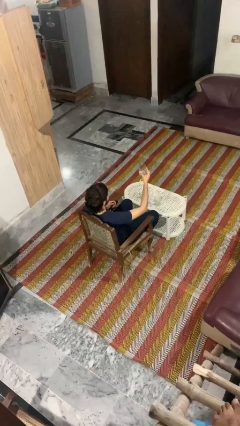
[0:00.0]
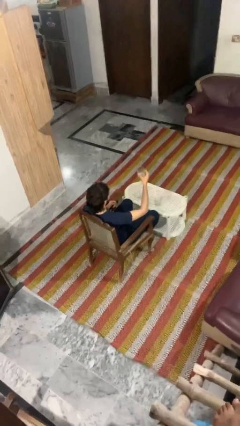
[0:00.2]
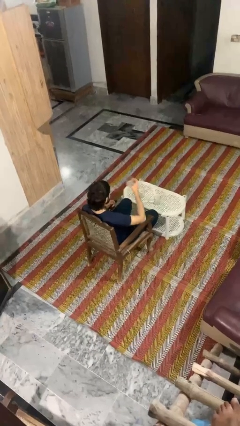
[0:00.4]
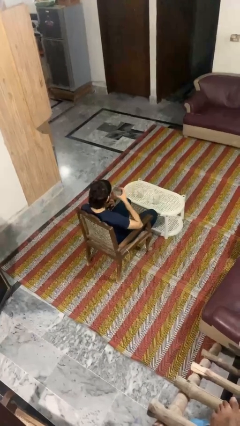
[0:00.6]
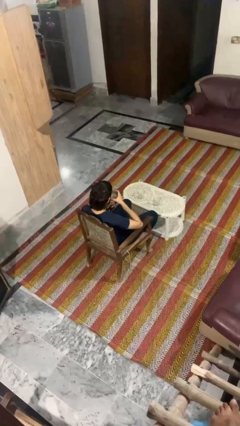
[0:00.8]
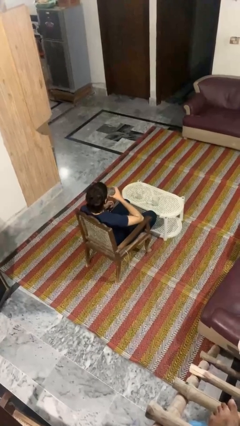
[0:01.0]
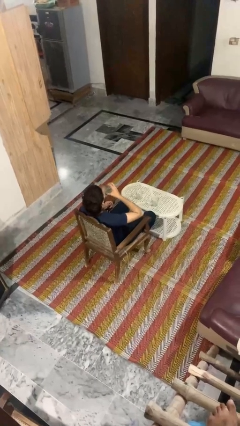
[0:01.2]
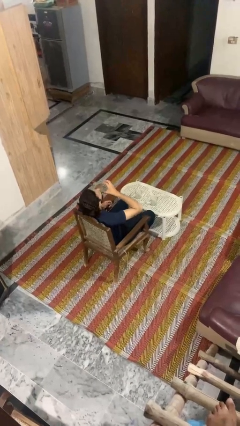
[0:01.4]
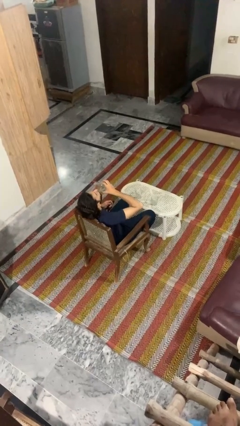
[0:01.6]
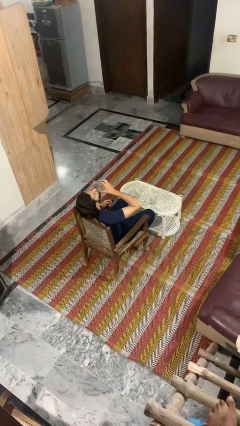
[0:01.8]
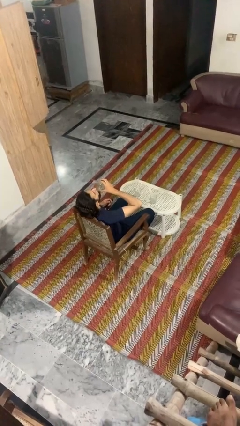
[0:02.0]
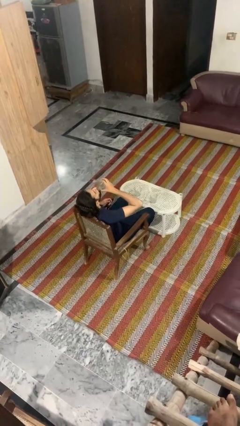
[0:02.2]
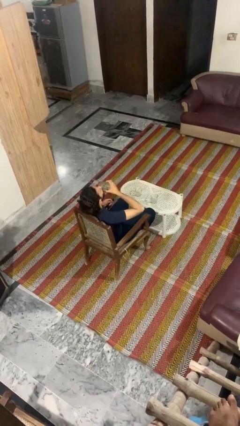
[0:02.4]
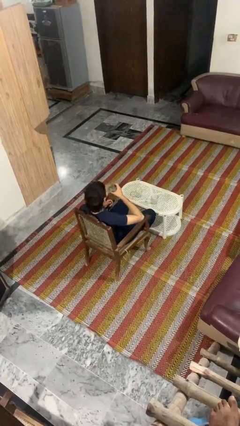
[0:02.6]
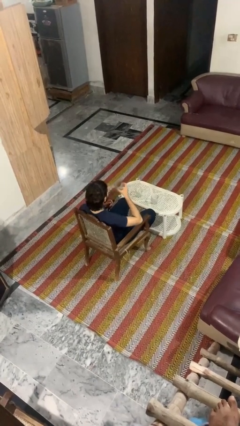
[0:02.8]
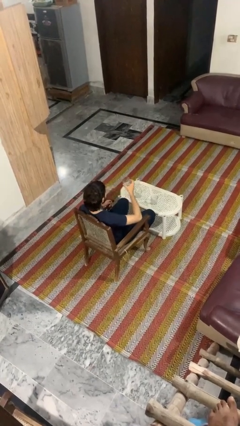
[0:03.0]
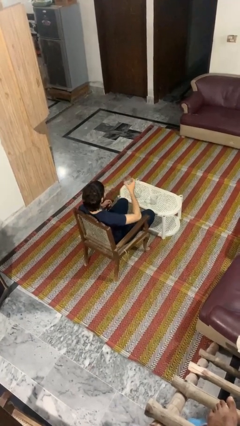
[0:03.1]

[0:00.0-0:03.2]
person drinks from shotglass

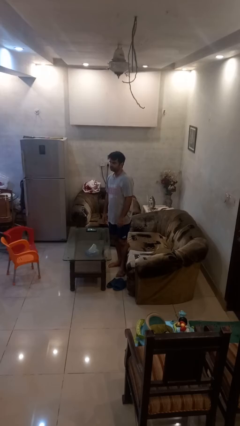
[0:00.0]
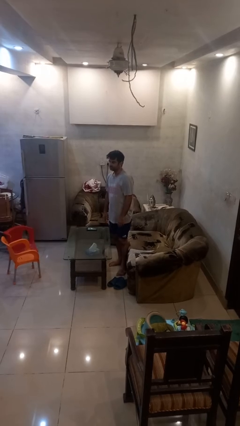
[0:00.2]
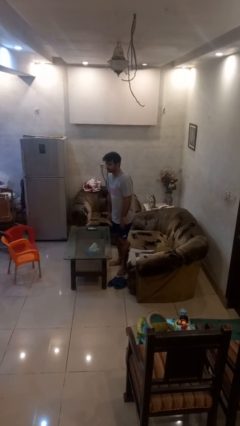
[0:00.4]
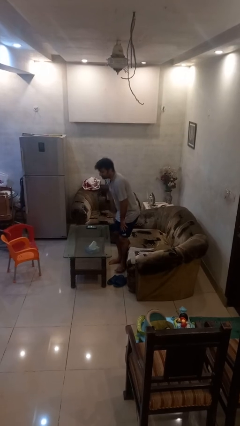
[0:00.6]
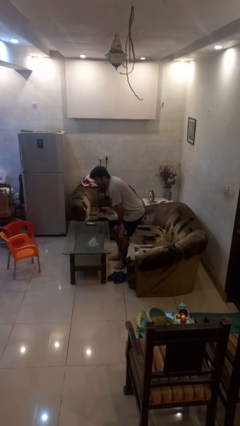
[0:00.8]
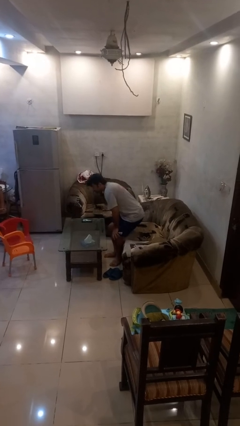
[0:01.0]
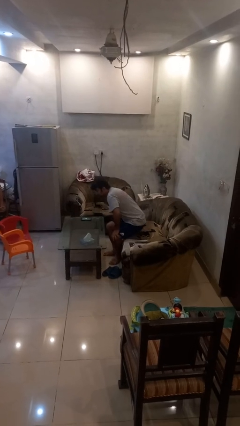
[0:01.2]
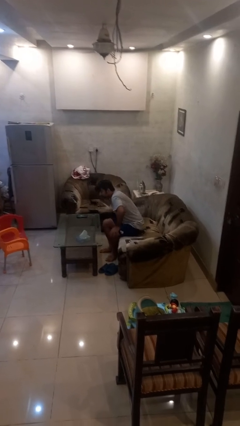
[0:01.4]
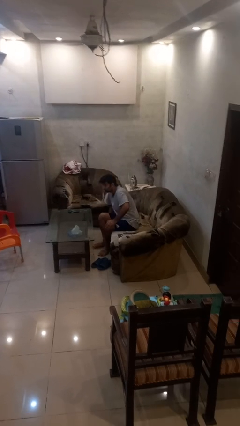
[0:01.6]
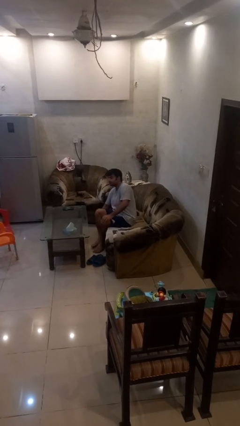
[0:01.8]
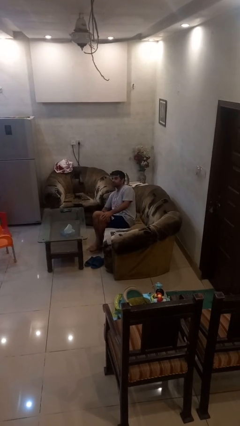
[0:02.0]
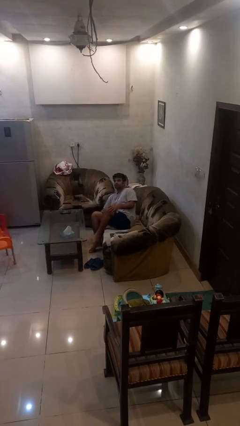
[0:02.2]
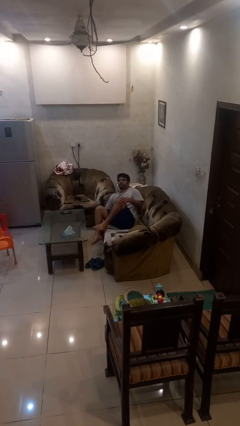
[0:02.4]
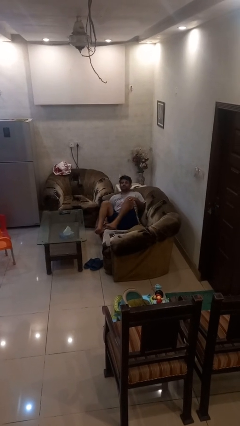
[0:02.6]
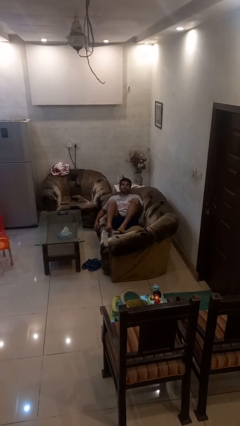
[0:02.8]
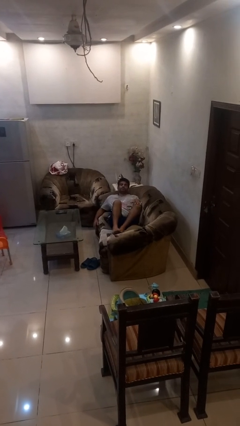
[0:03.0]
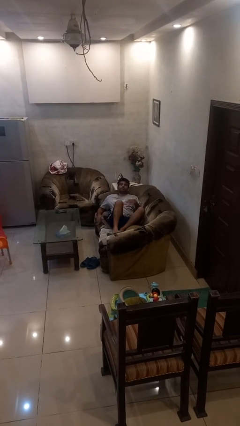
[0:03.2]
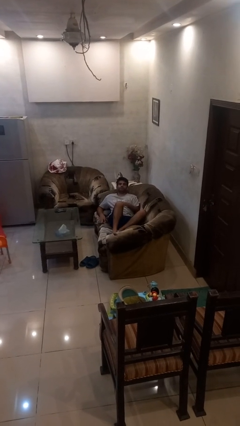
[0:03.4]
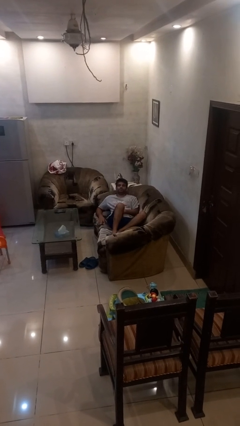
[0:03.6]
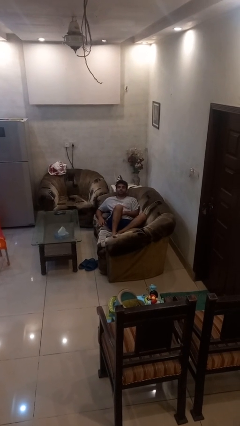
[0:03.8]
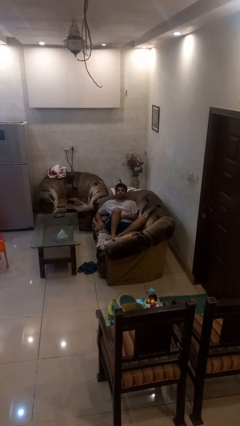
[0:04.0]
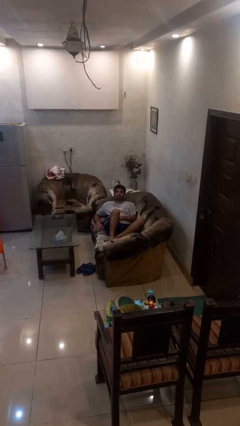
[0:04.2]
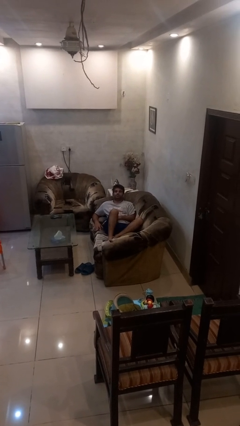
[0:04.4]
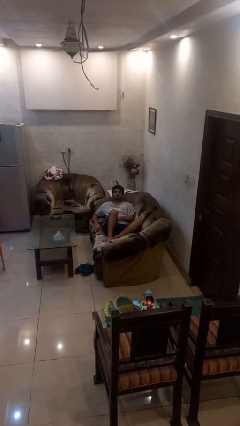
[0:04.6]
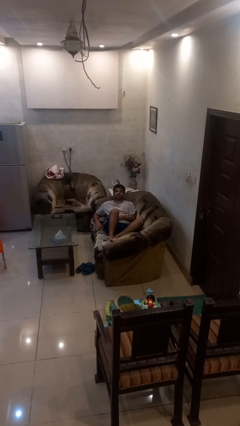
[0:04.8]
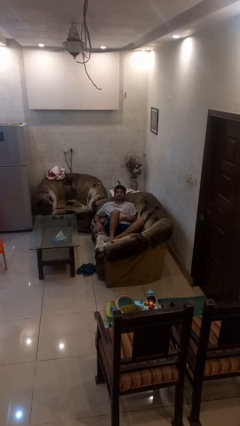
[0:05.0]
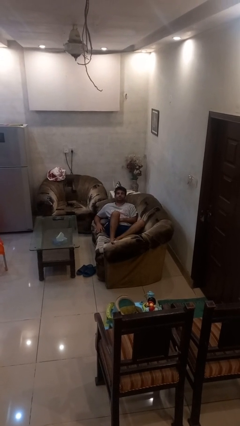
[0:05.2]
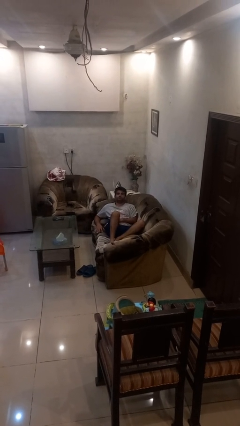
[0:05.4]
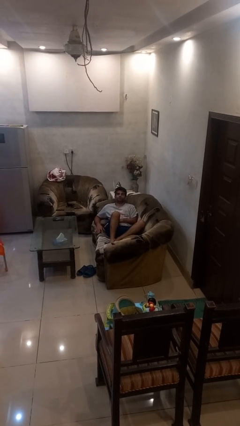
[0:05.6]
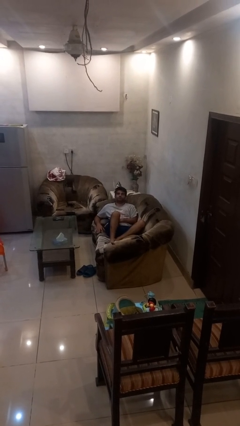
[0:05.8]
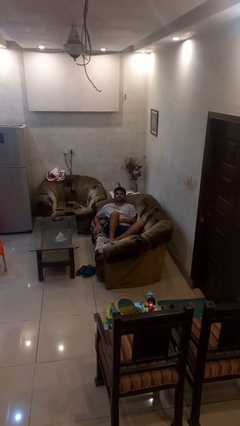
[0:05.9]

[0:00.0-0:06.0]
person lies down on couch

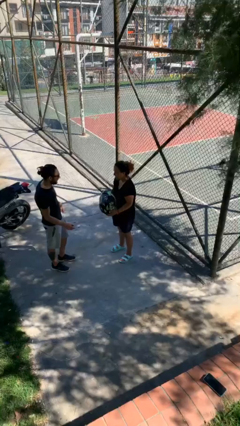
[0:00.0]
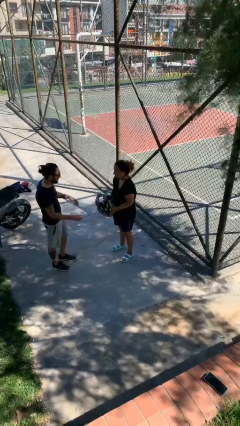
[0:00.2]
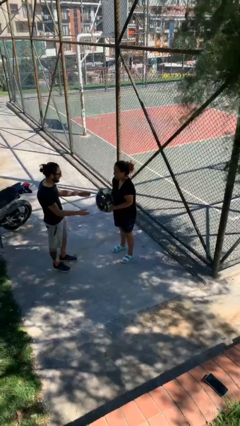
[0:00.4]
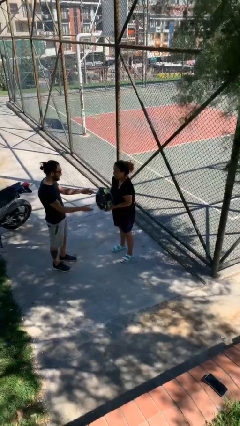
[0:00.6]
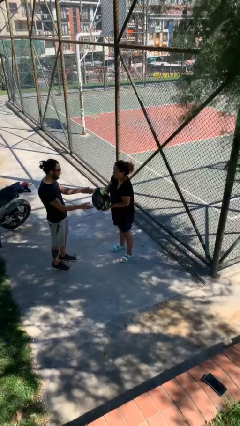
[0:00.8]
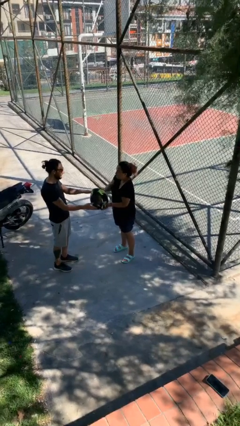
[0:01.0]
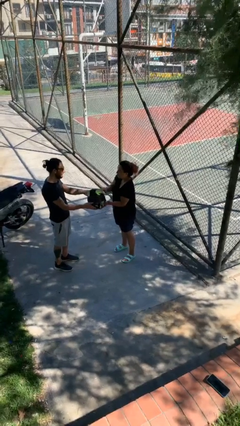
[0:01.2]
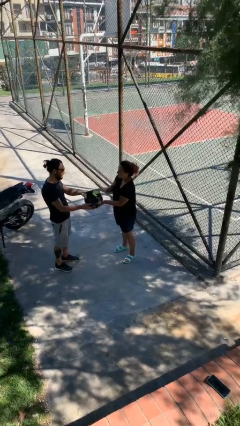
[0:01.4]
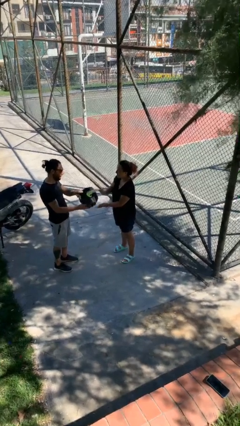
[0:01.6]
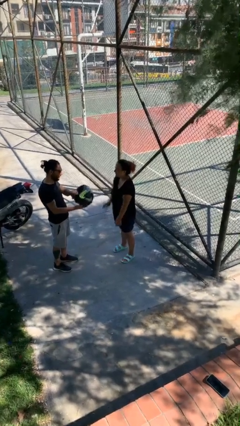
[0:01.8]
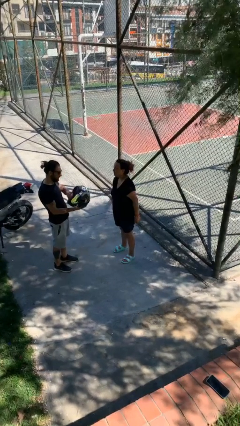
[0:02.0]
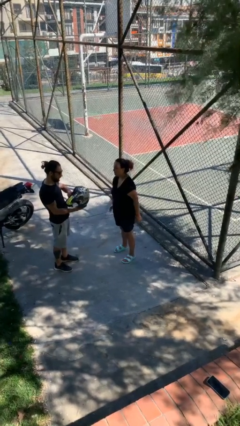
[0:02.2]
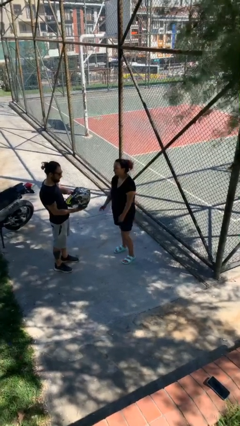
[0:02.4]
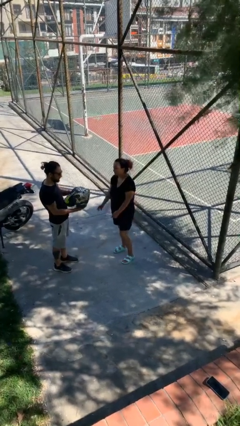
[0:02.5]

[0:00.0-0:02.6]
person transfers object to person

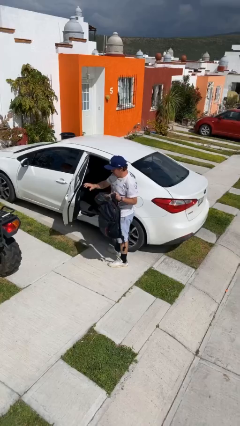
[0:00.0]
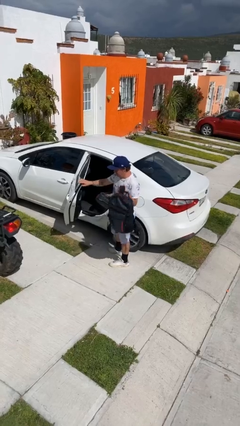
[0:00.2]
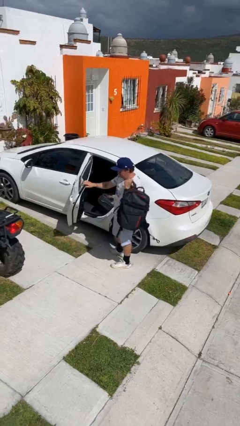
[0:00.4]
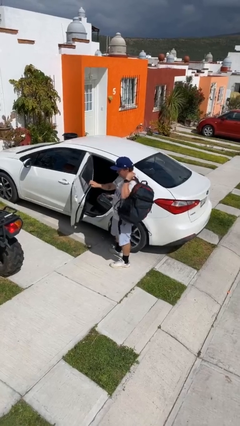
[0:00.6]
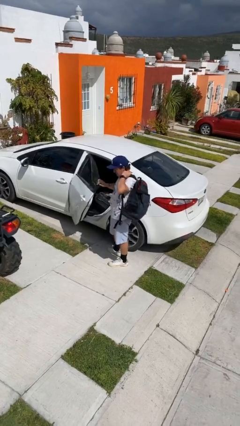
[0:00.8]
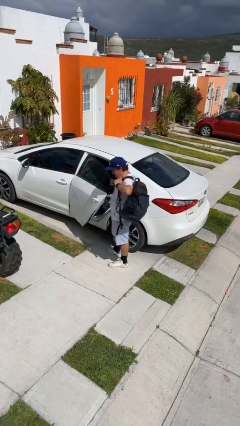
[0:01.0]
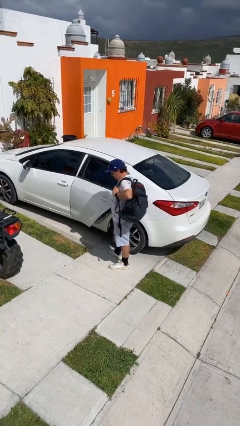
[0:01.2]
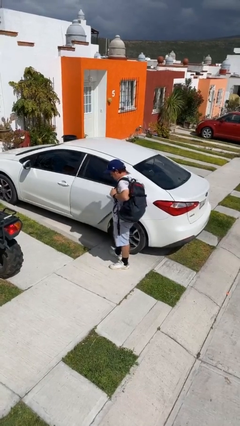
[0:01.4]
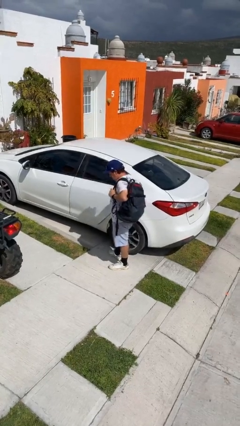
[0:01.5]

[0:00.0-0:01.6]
person closes car door

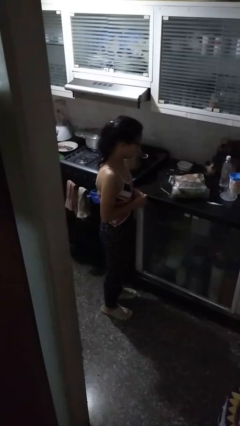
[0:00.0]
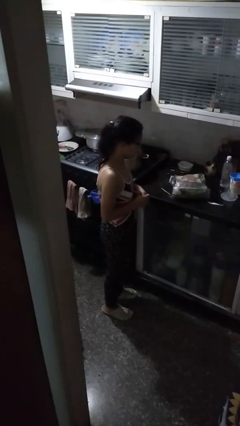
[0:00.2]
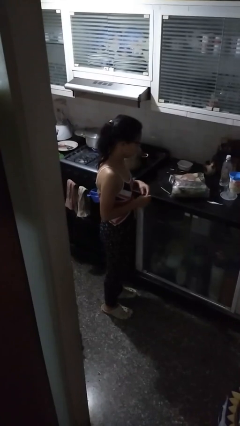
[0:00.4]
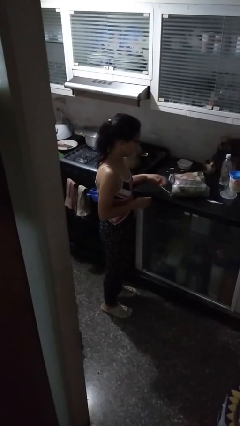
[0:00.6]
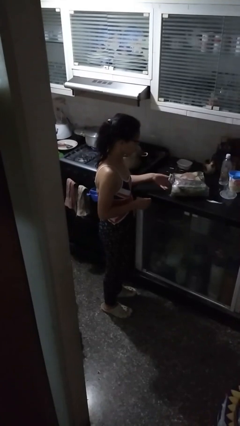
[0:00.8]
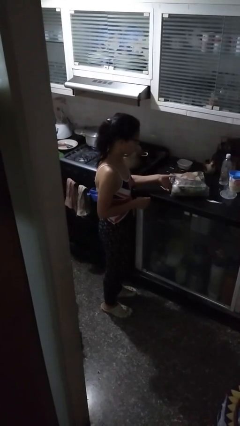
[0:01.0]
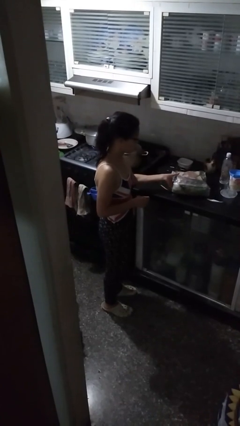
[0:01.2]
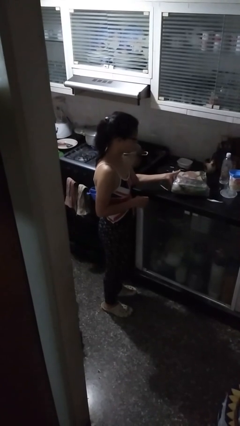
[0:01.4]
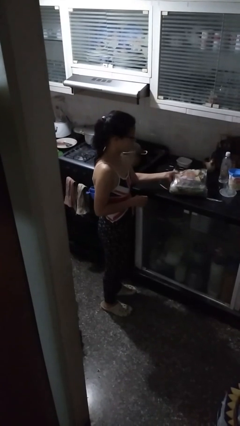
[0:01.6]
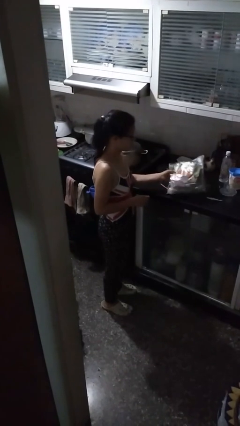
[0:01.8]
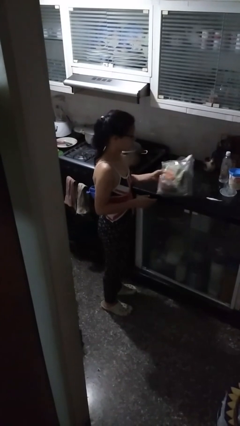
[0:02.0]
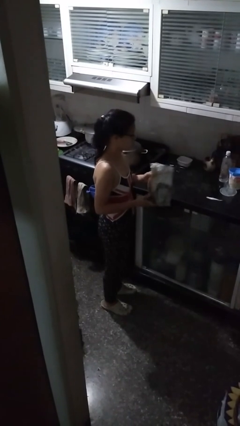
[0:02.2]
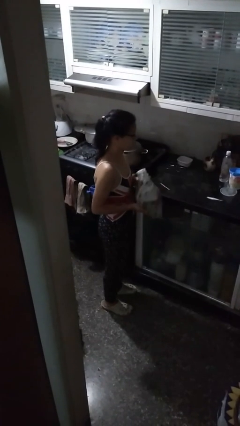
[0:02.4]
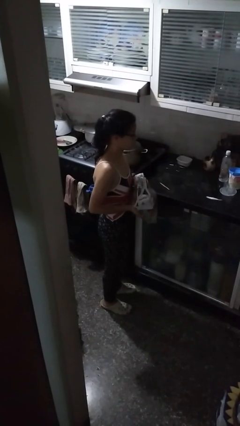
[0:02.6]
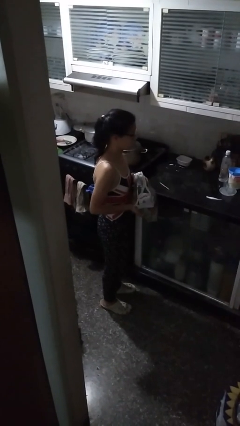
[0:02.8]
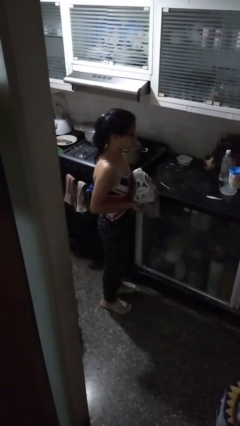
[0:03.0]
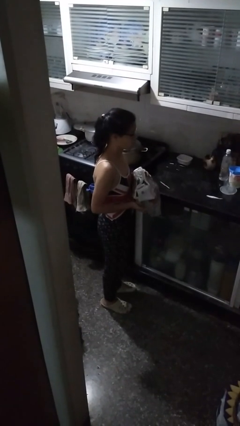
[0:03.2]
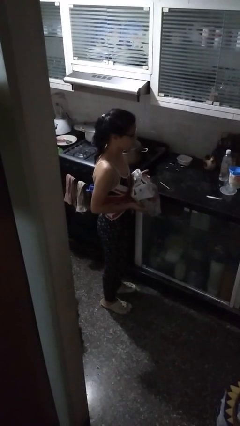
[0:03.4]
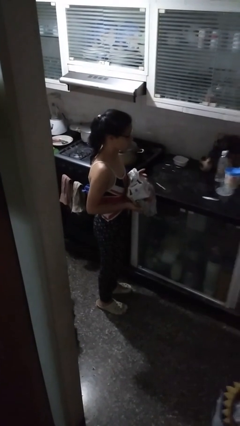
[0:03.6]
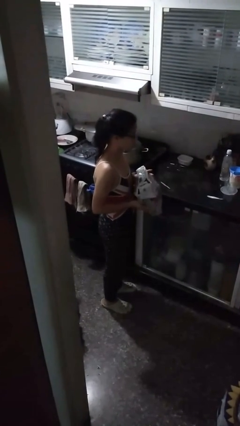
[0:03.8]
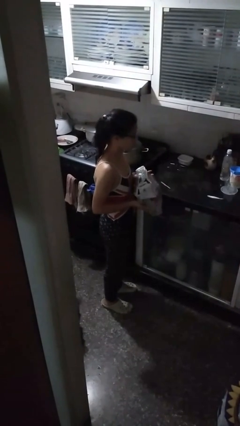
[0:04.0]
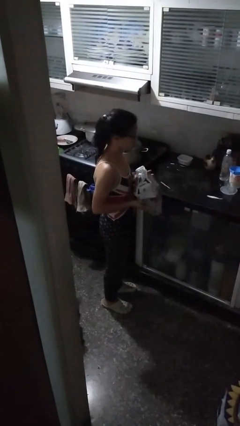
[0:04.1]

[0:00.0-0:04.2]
person picks up object from countertop
